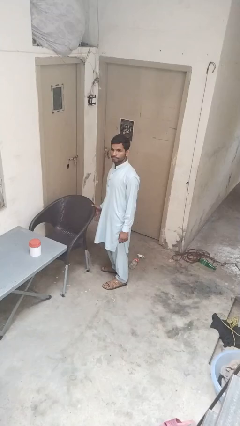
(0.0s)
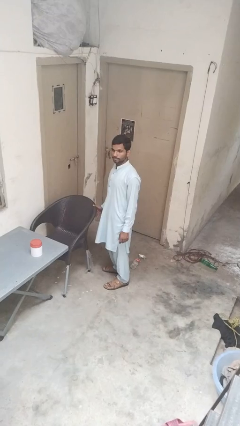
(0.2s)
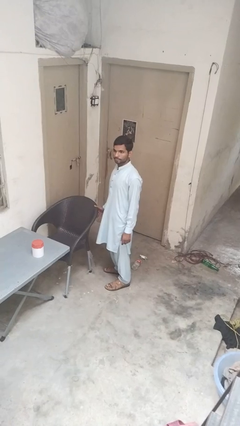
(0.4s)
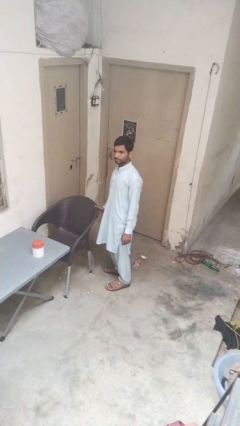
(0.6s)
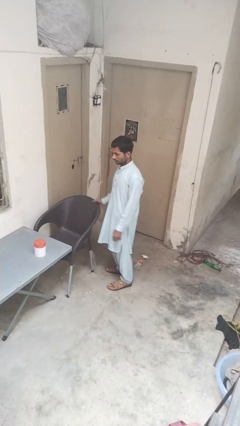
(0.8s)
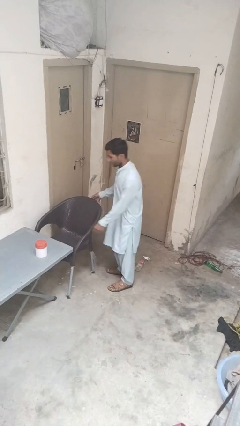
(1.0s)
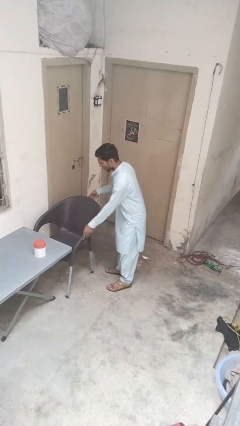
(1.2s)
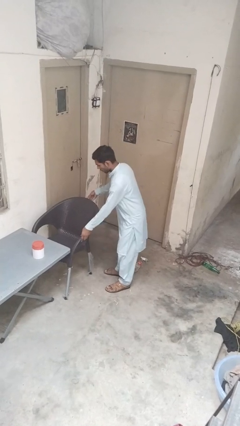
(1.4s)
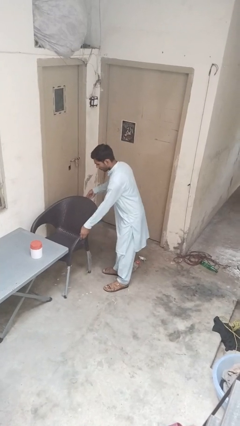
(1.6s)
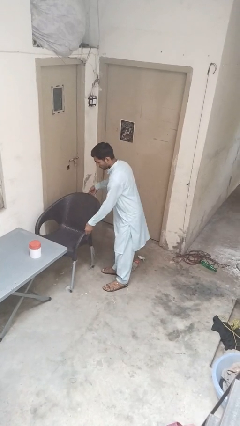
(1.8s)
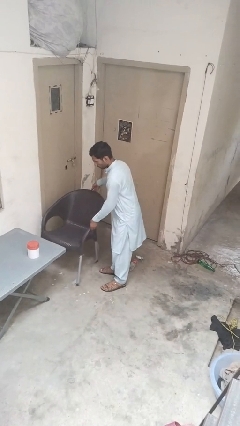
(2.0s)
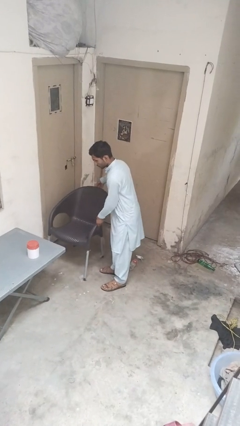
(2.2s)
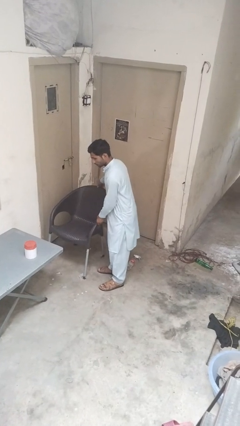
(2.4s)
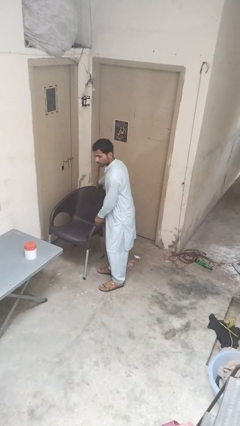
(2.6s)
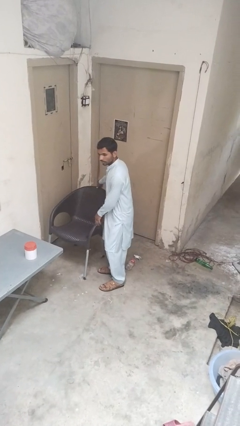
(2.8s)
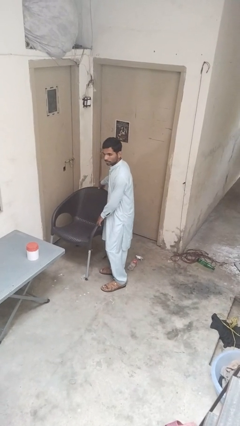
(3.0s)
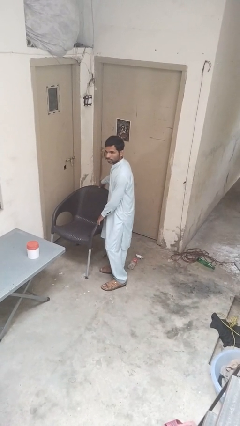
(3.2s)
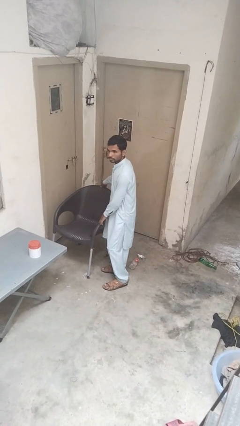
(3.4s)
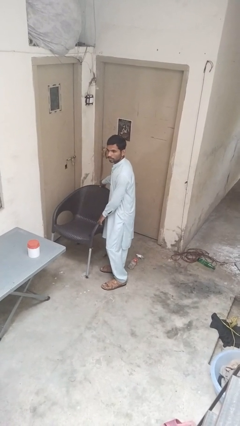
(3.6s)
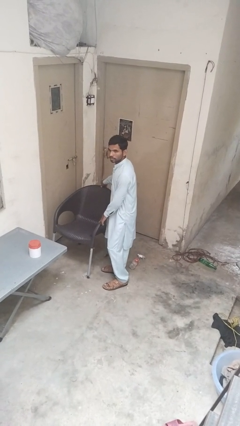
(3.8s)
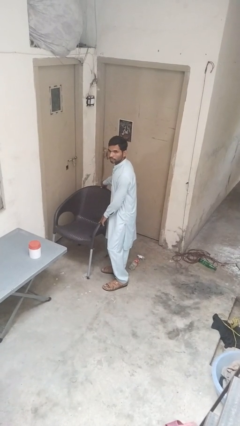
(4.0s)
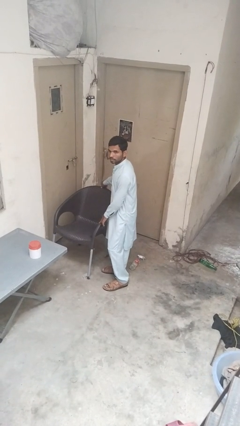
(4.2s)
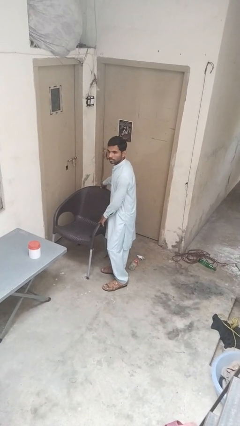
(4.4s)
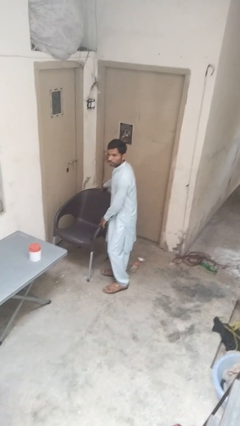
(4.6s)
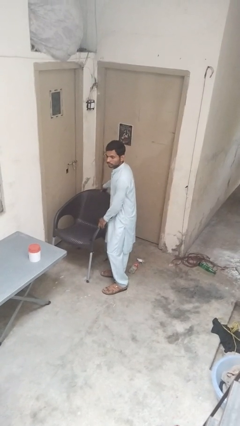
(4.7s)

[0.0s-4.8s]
person pulls out chair

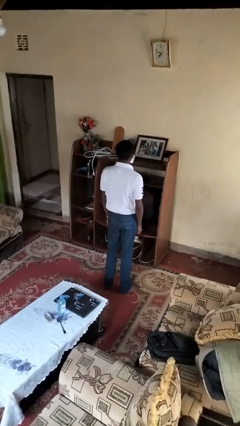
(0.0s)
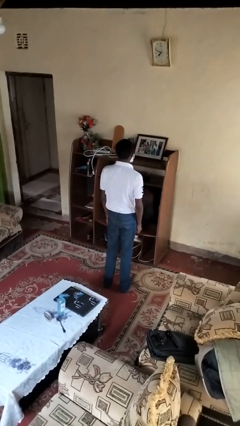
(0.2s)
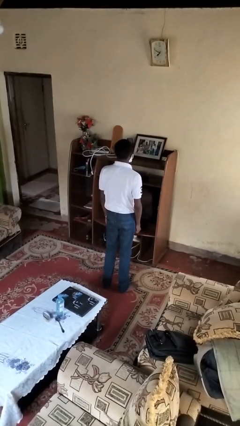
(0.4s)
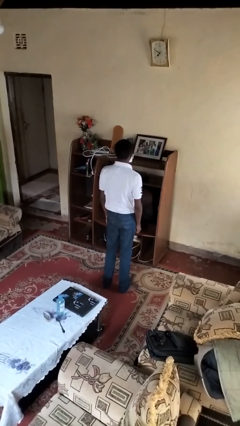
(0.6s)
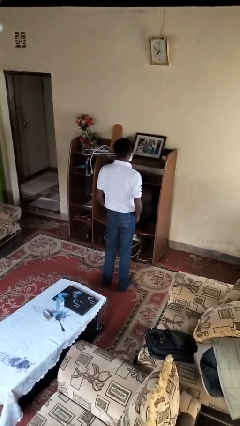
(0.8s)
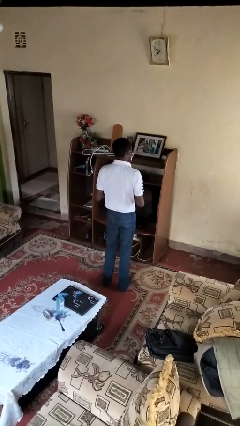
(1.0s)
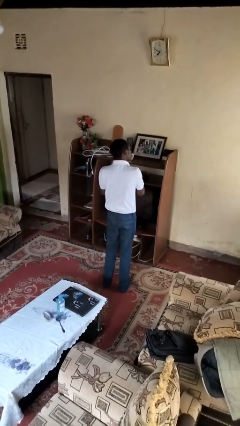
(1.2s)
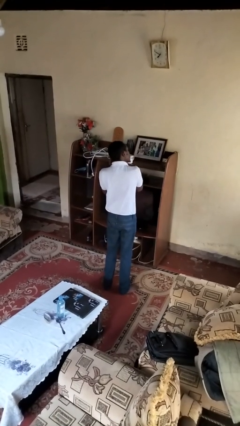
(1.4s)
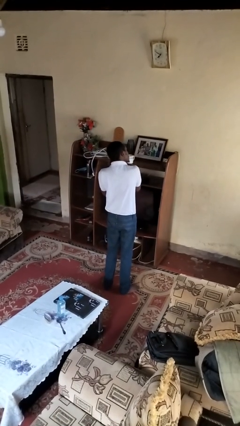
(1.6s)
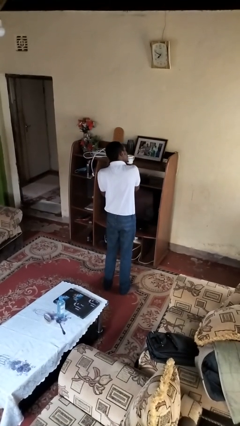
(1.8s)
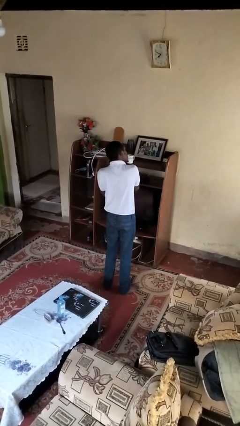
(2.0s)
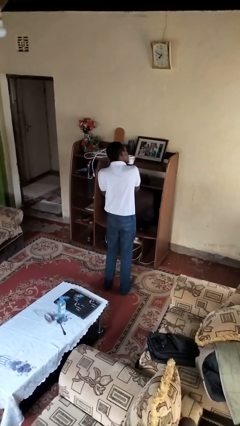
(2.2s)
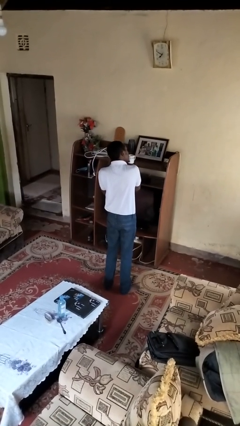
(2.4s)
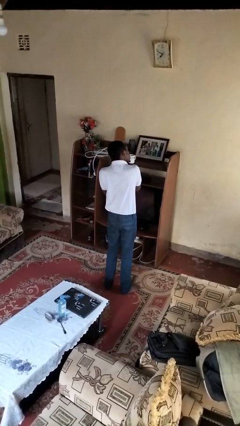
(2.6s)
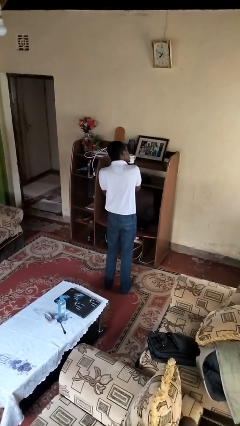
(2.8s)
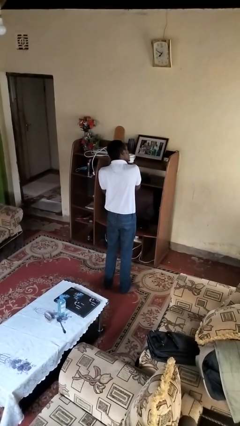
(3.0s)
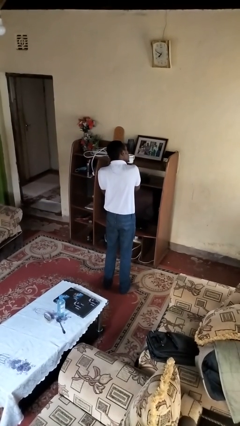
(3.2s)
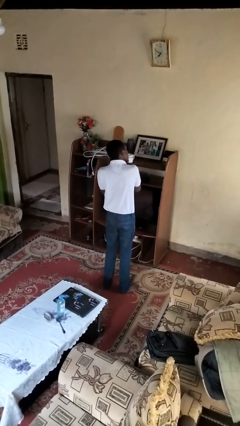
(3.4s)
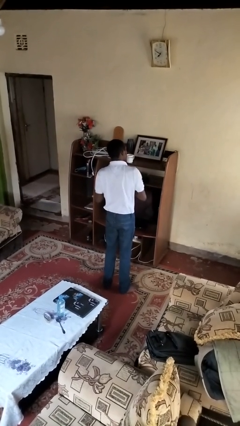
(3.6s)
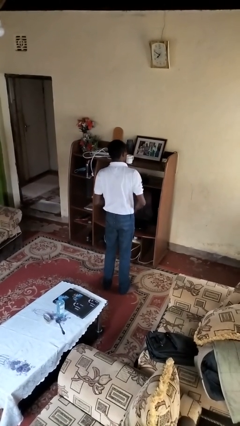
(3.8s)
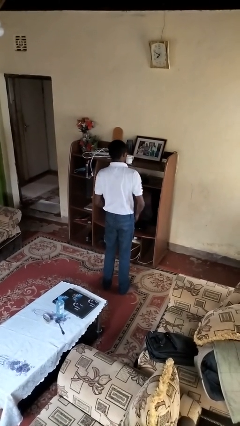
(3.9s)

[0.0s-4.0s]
person puts on earrings

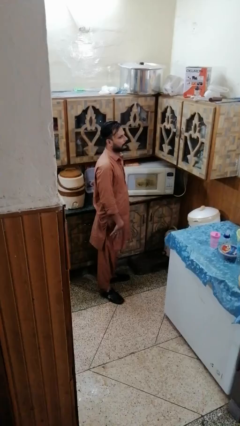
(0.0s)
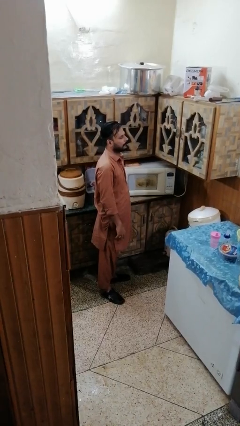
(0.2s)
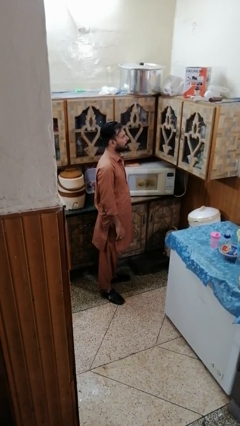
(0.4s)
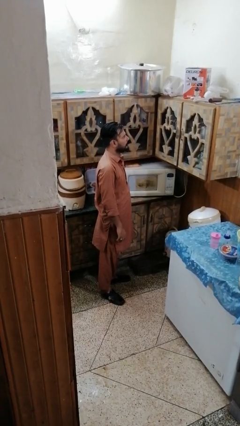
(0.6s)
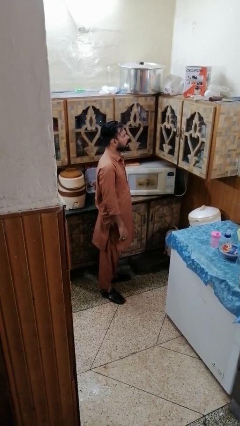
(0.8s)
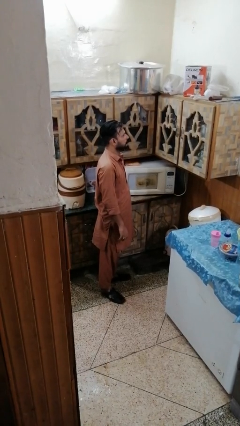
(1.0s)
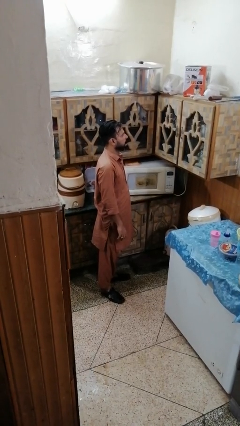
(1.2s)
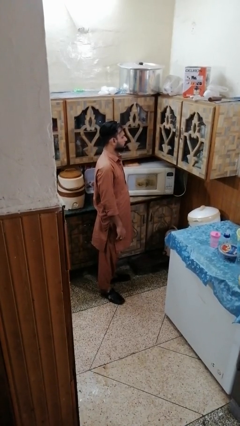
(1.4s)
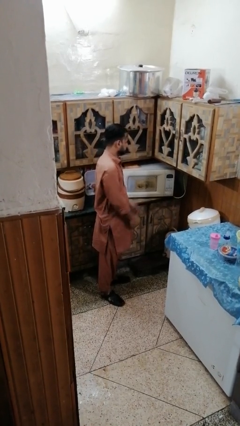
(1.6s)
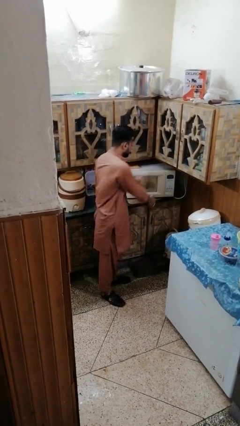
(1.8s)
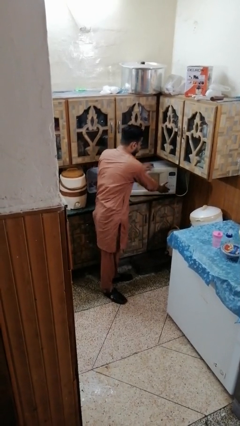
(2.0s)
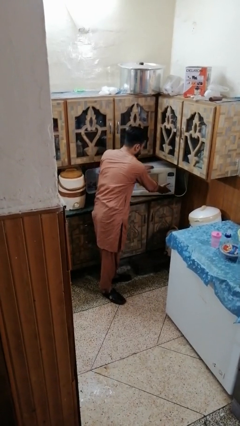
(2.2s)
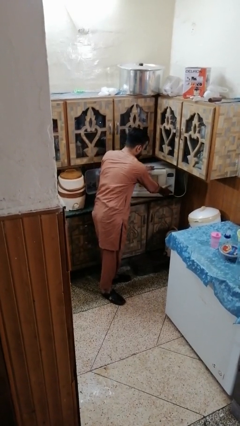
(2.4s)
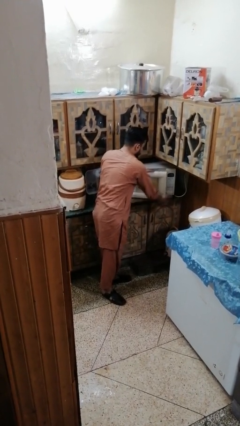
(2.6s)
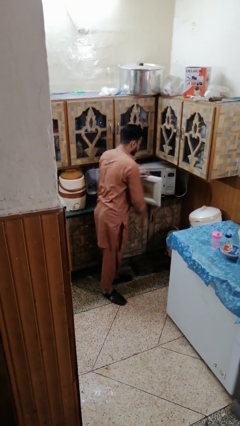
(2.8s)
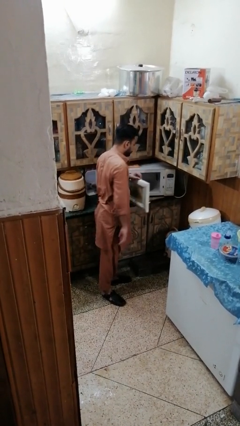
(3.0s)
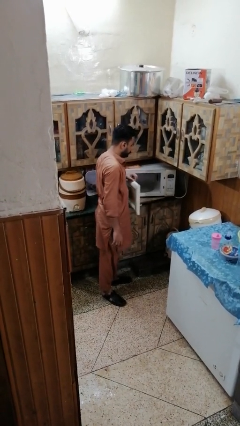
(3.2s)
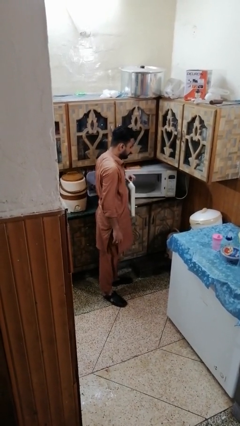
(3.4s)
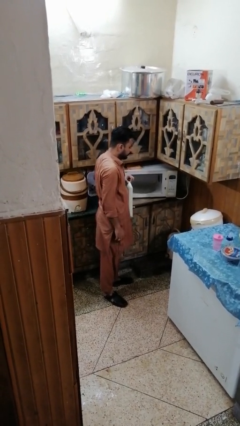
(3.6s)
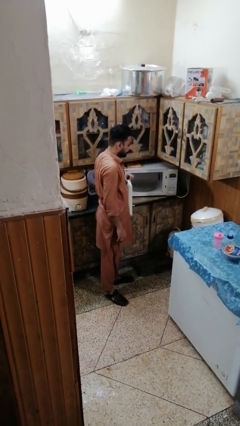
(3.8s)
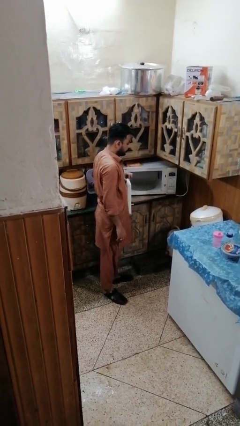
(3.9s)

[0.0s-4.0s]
person opens microwave

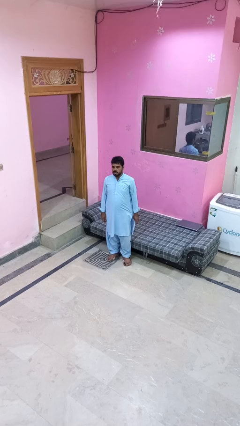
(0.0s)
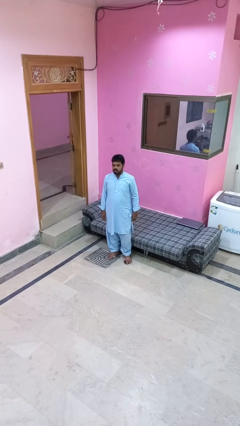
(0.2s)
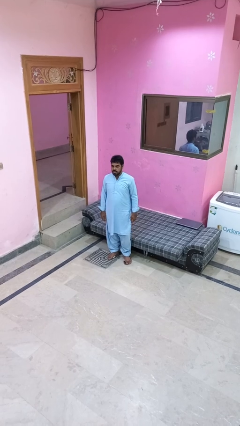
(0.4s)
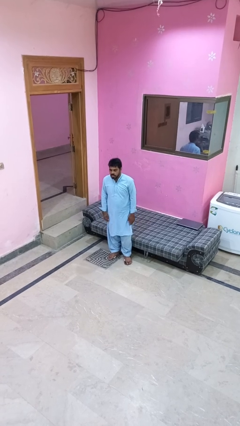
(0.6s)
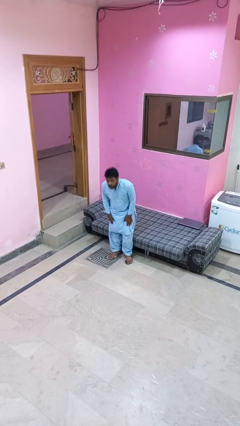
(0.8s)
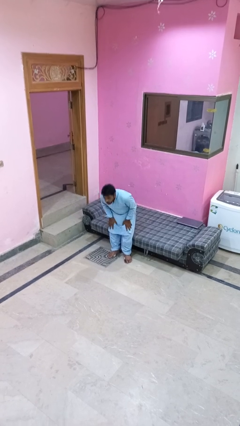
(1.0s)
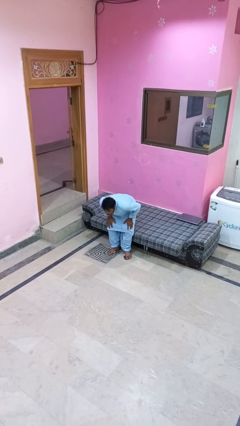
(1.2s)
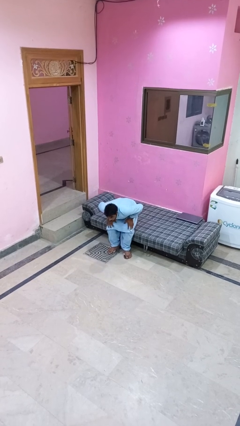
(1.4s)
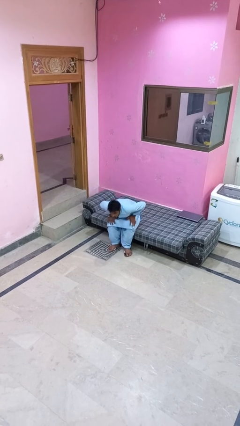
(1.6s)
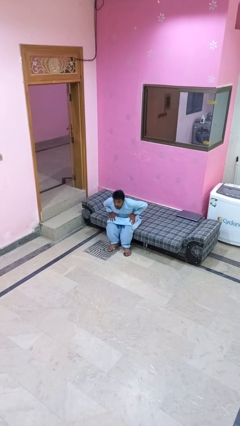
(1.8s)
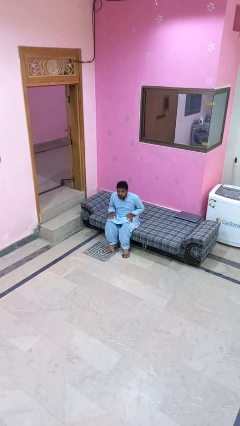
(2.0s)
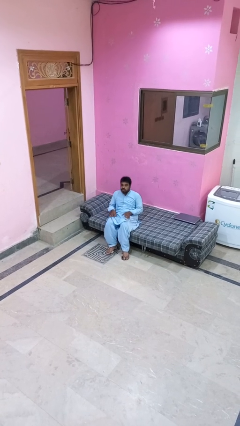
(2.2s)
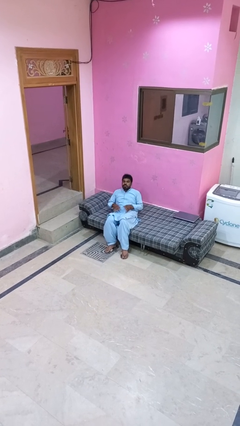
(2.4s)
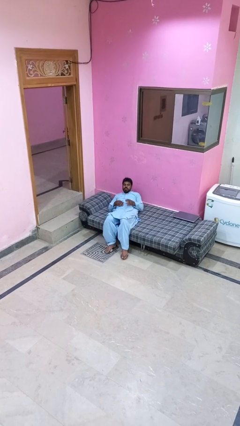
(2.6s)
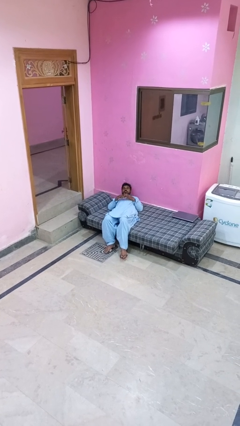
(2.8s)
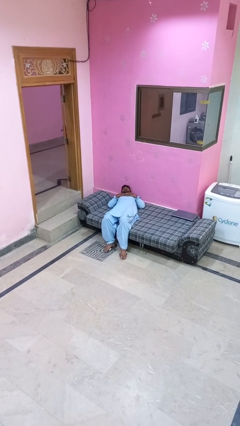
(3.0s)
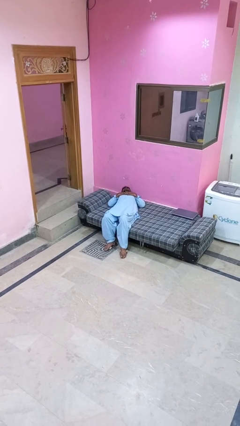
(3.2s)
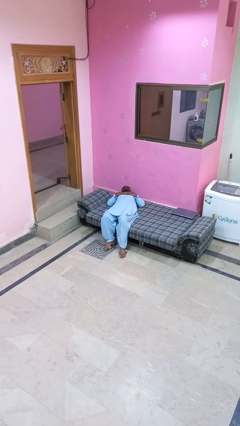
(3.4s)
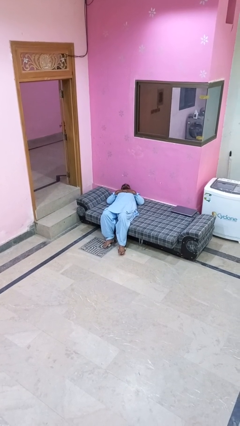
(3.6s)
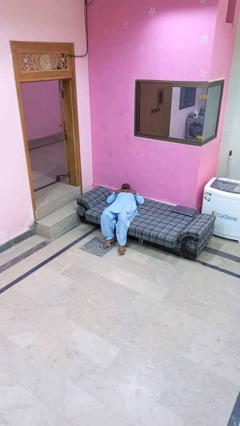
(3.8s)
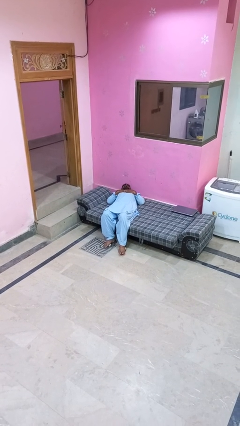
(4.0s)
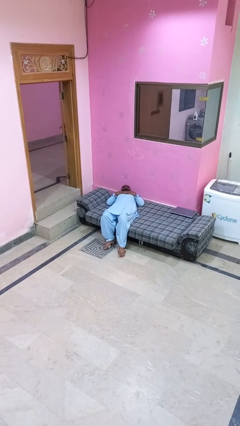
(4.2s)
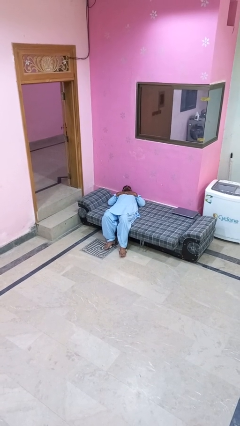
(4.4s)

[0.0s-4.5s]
person lies down on bed

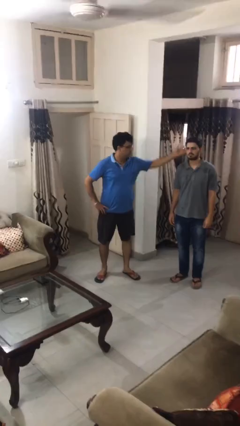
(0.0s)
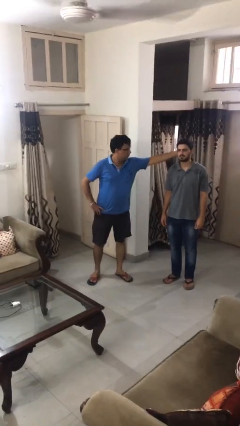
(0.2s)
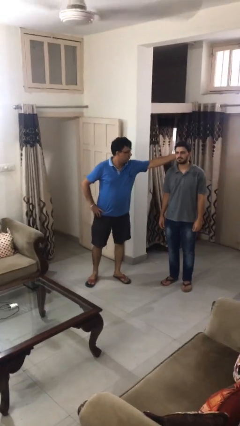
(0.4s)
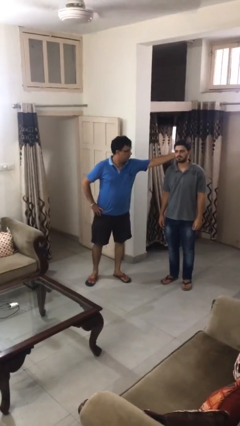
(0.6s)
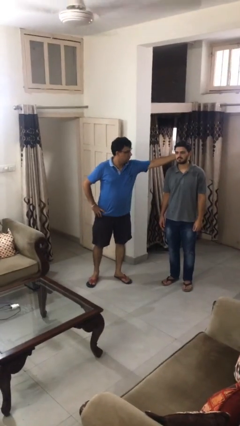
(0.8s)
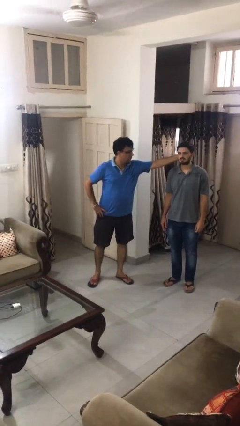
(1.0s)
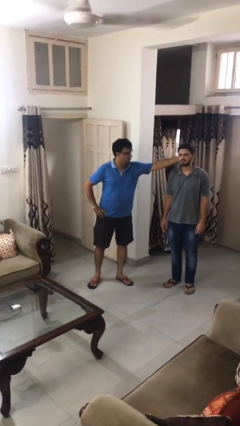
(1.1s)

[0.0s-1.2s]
person grabs person by hair
